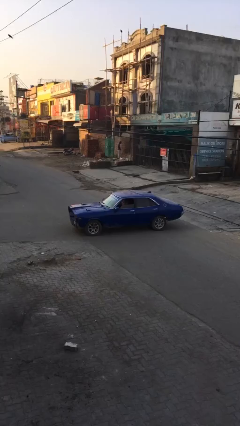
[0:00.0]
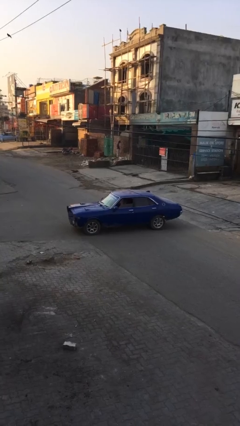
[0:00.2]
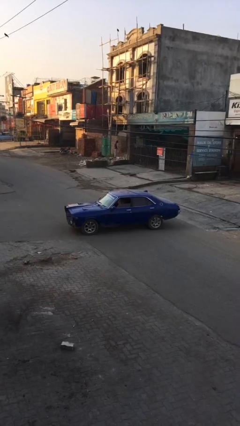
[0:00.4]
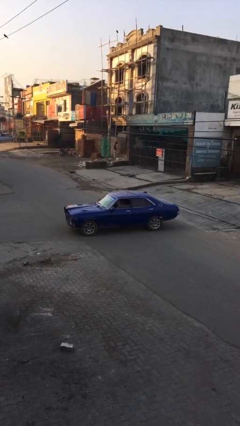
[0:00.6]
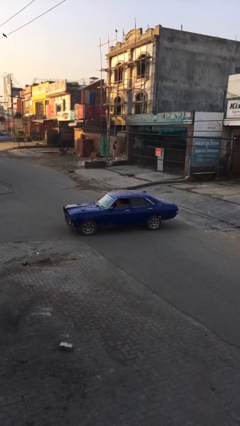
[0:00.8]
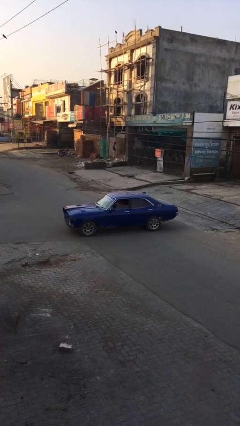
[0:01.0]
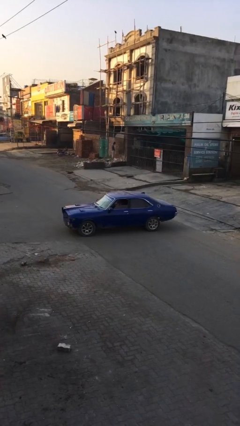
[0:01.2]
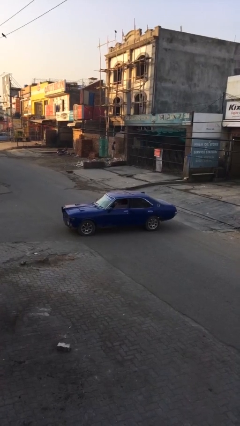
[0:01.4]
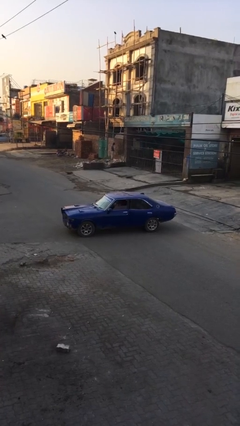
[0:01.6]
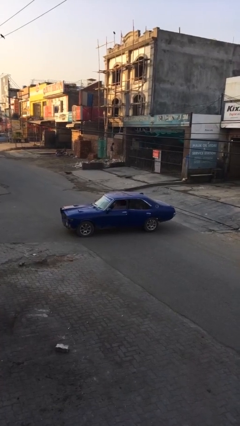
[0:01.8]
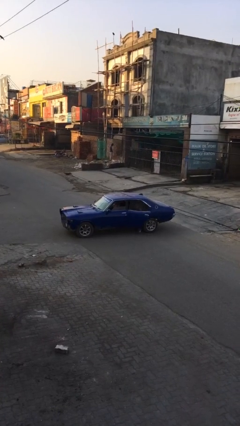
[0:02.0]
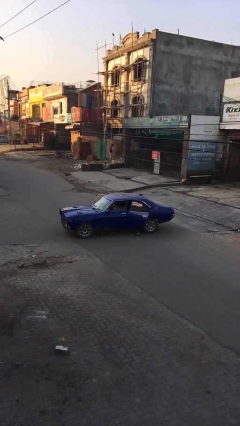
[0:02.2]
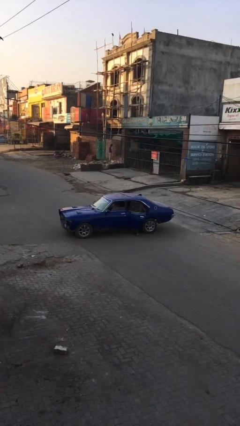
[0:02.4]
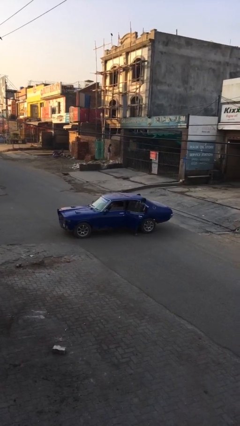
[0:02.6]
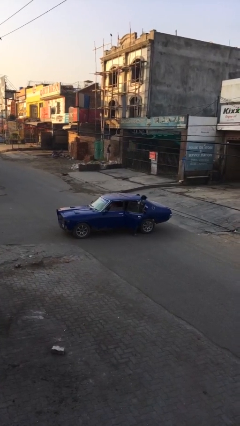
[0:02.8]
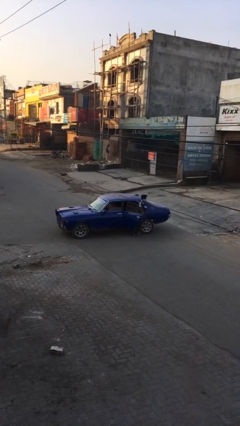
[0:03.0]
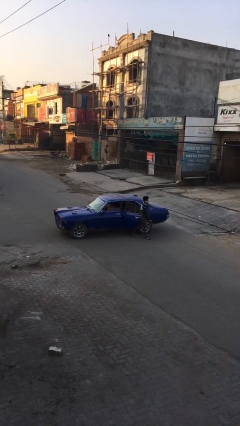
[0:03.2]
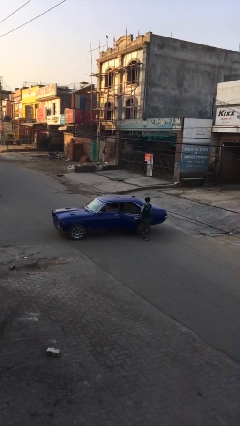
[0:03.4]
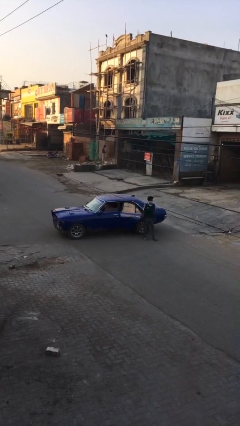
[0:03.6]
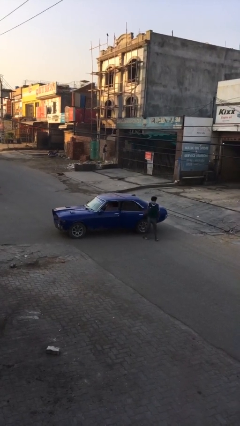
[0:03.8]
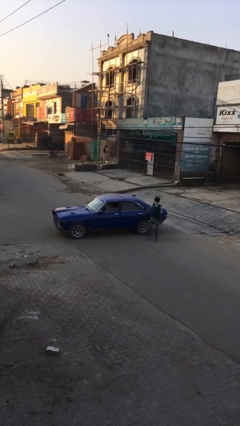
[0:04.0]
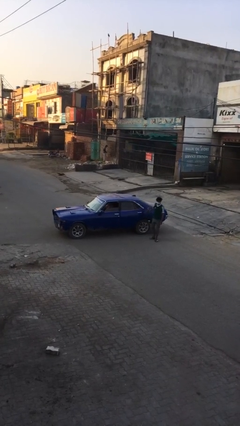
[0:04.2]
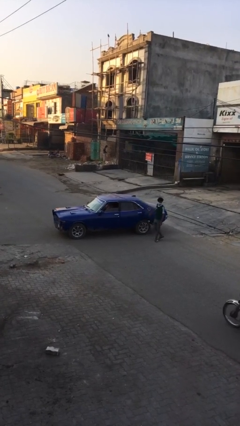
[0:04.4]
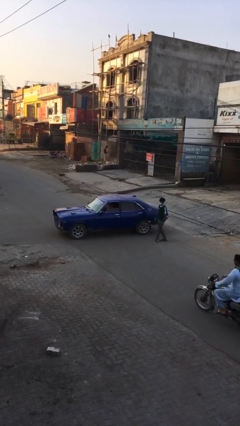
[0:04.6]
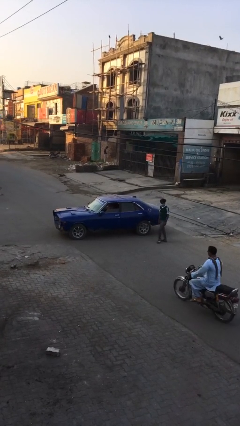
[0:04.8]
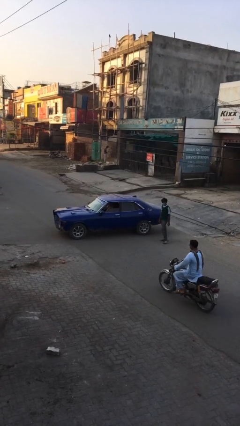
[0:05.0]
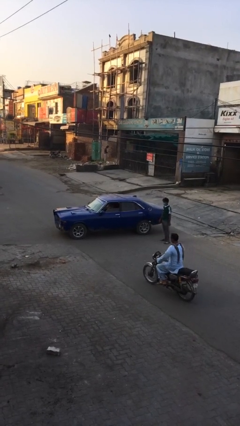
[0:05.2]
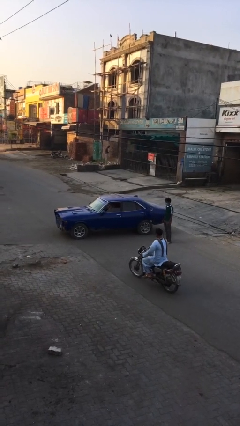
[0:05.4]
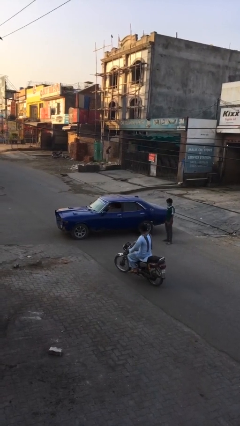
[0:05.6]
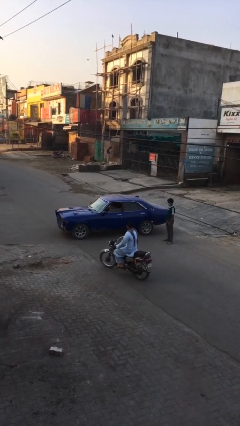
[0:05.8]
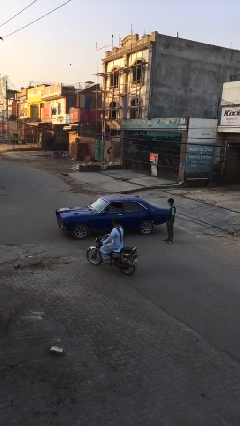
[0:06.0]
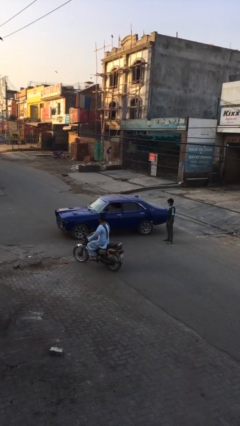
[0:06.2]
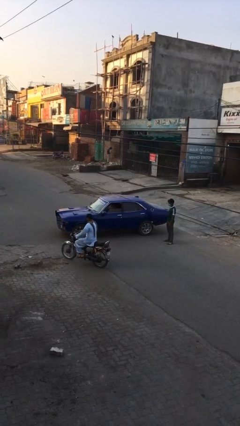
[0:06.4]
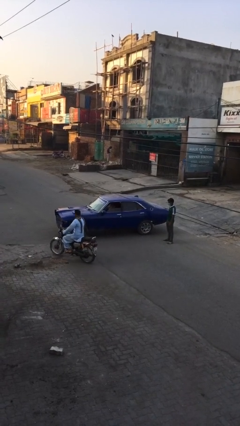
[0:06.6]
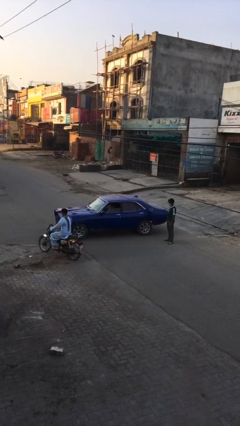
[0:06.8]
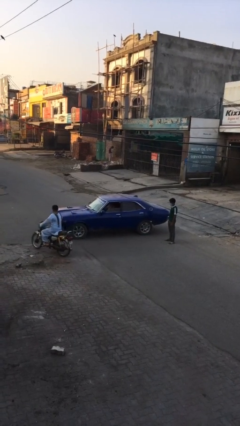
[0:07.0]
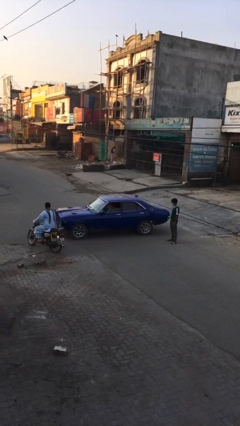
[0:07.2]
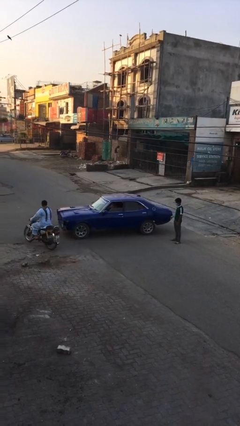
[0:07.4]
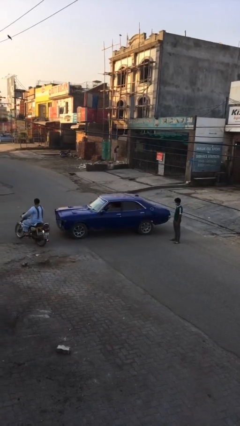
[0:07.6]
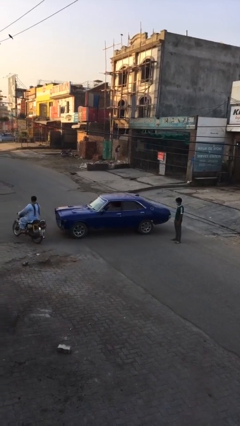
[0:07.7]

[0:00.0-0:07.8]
car drops off person

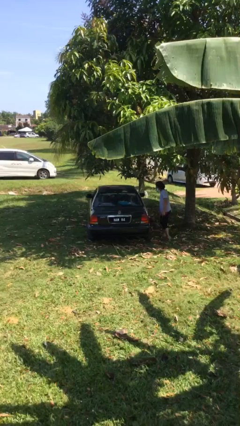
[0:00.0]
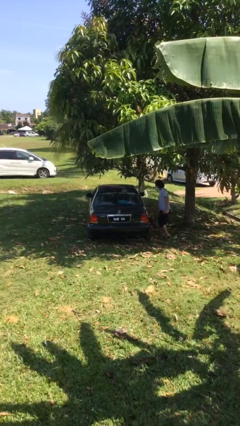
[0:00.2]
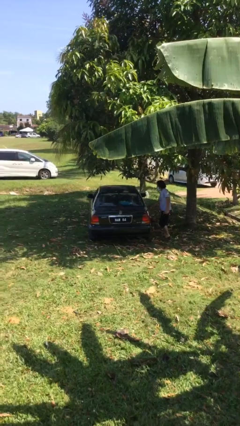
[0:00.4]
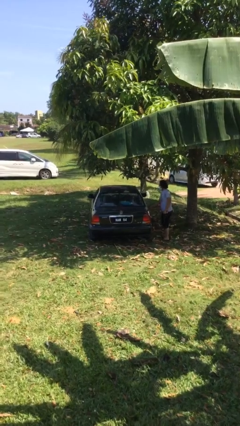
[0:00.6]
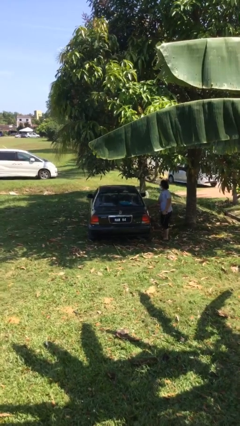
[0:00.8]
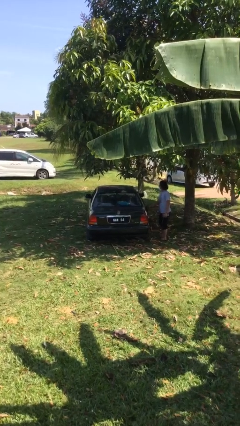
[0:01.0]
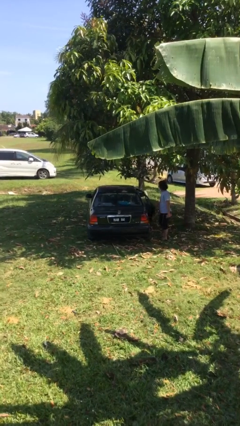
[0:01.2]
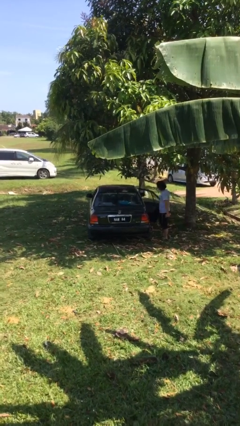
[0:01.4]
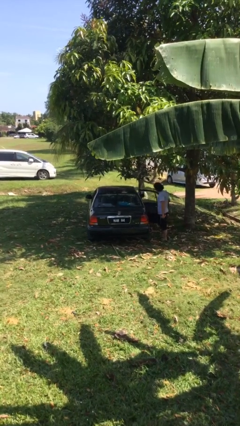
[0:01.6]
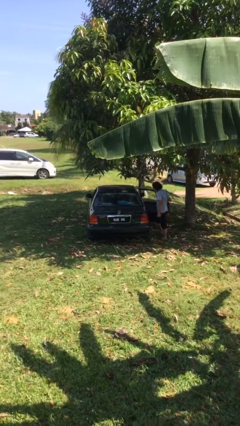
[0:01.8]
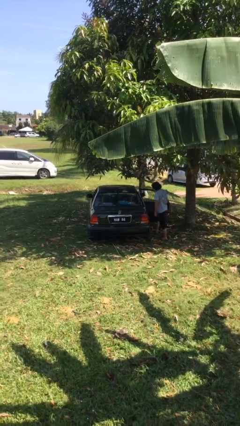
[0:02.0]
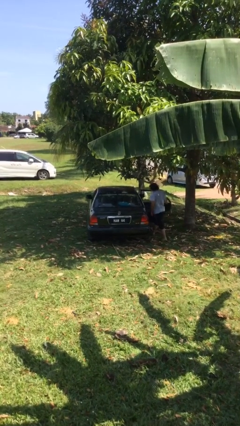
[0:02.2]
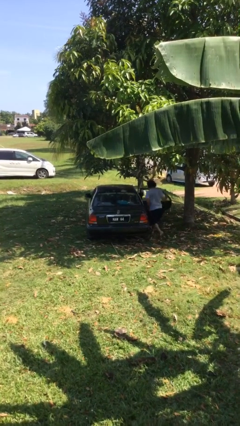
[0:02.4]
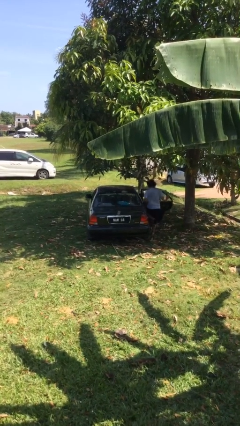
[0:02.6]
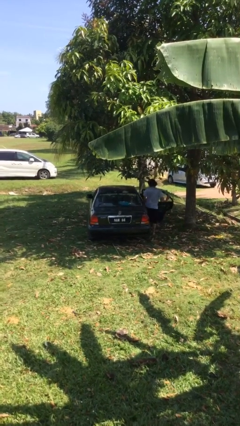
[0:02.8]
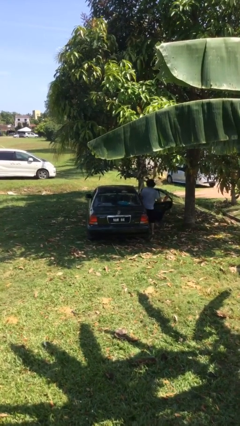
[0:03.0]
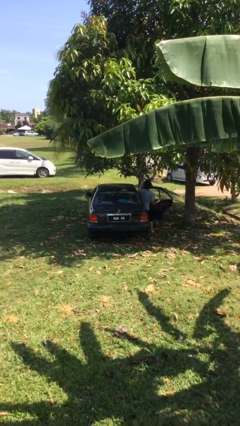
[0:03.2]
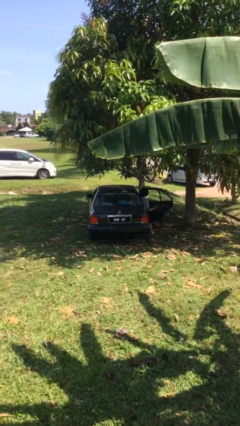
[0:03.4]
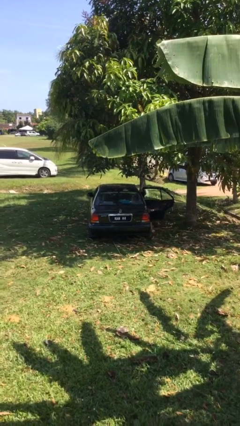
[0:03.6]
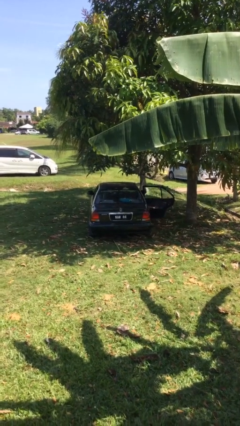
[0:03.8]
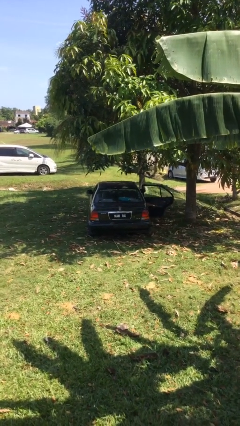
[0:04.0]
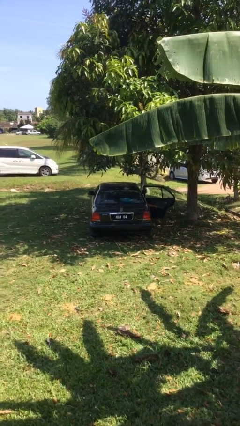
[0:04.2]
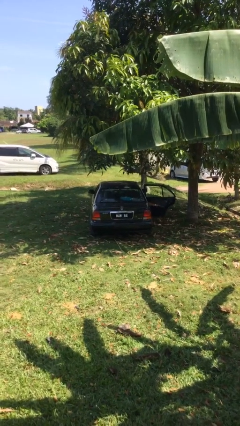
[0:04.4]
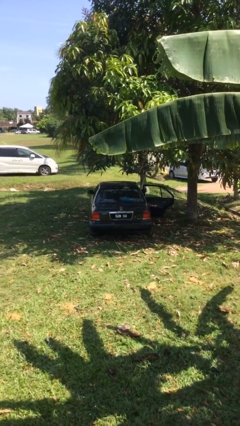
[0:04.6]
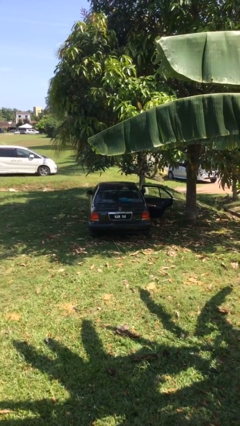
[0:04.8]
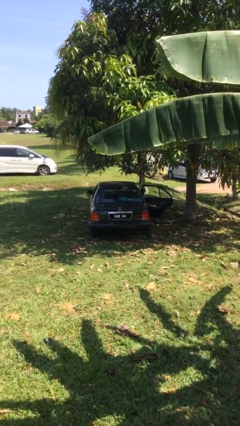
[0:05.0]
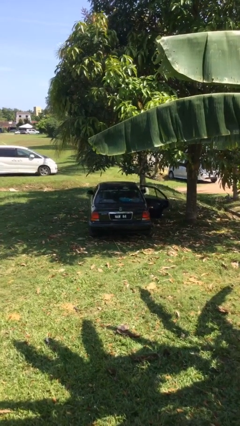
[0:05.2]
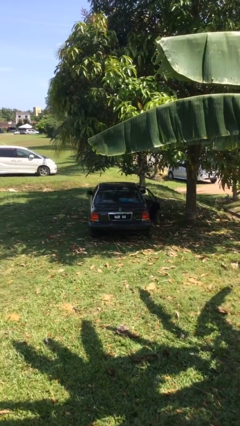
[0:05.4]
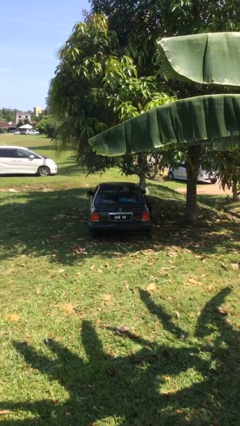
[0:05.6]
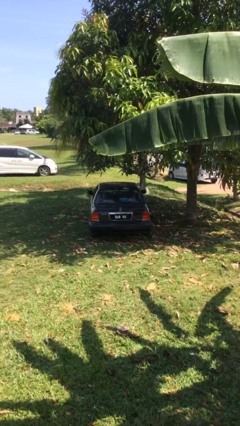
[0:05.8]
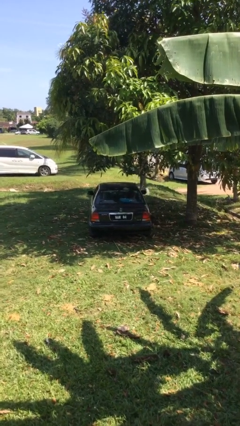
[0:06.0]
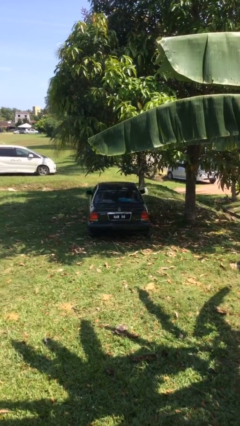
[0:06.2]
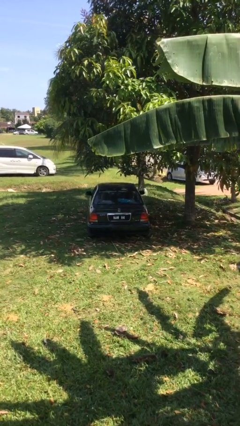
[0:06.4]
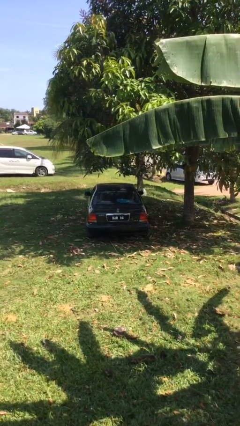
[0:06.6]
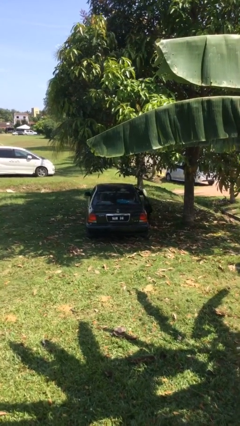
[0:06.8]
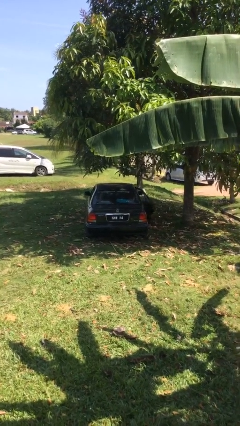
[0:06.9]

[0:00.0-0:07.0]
car picks up person

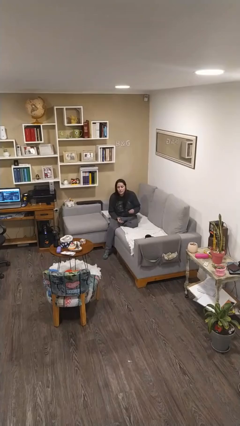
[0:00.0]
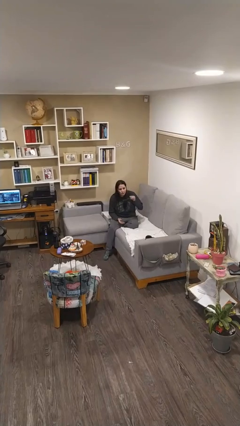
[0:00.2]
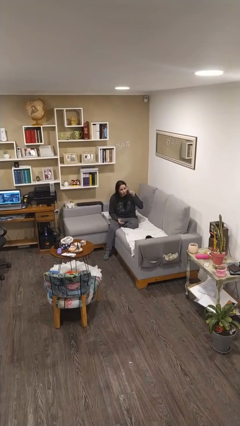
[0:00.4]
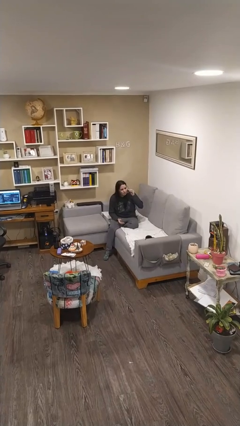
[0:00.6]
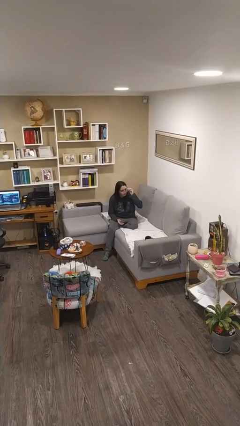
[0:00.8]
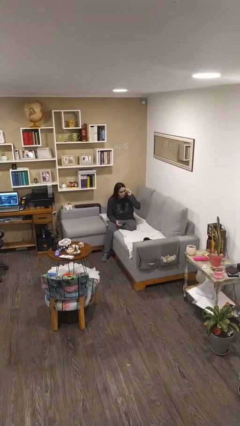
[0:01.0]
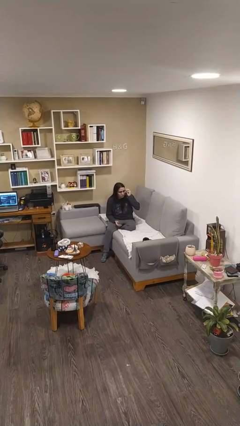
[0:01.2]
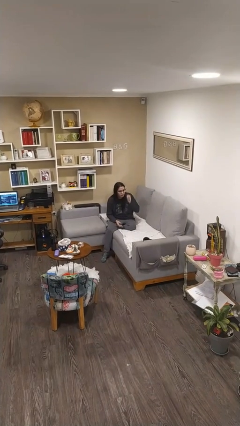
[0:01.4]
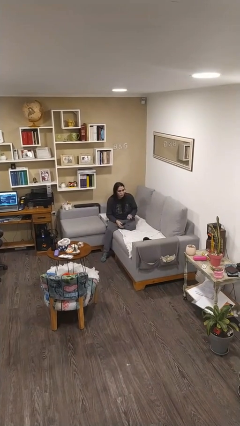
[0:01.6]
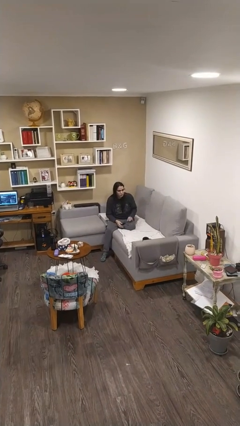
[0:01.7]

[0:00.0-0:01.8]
person puts on glasses

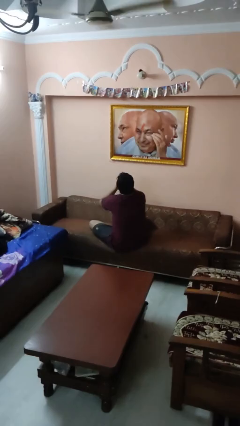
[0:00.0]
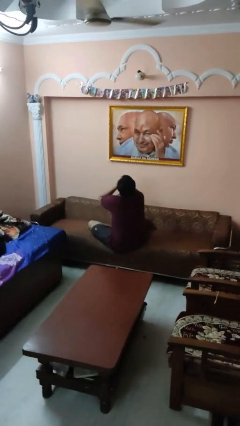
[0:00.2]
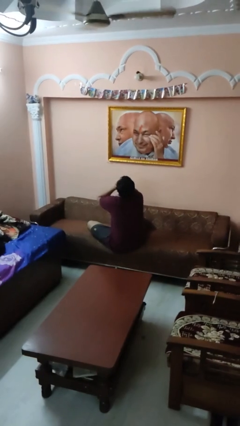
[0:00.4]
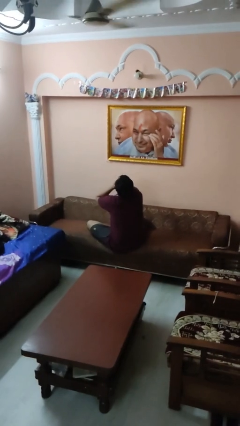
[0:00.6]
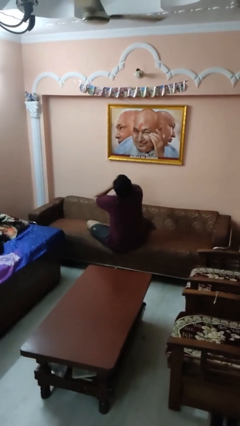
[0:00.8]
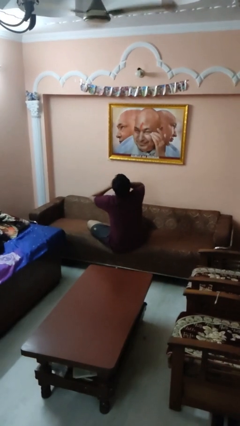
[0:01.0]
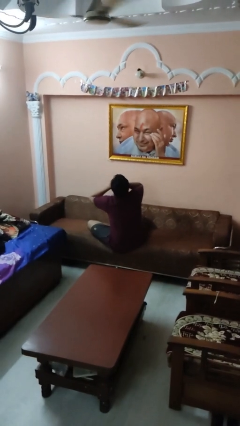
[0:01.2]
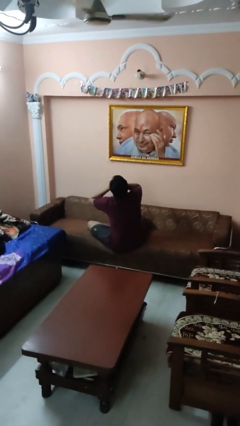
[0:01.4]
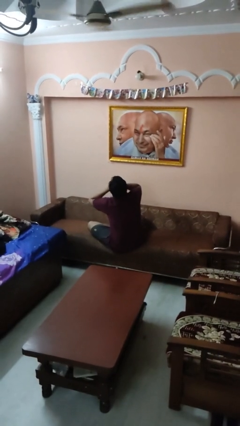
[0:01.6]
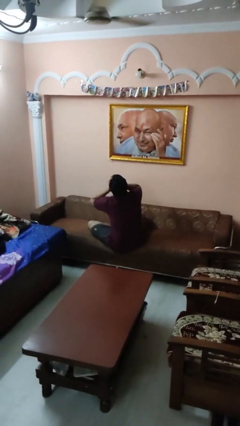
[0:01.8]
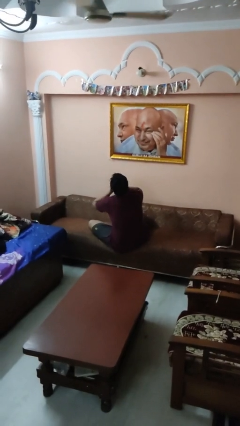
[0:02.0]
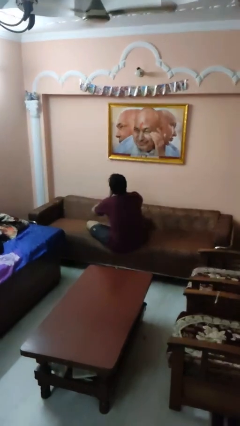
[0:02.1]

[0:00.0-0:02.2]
person covers face with hands
